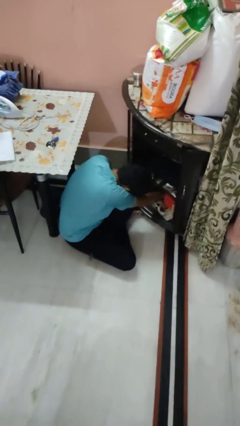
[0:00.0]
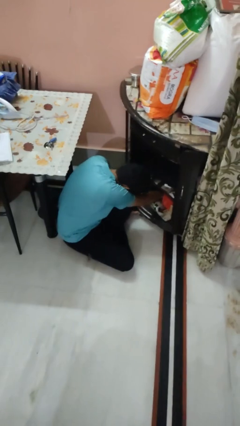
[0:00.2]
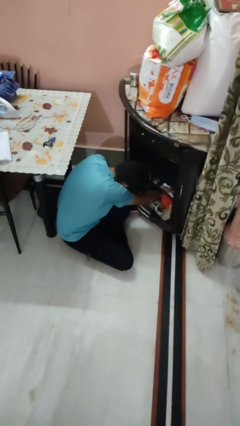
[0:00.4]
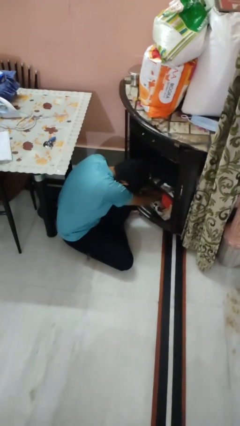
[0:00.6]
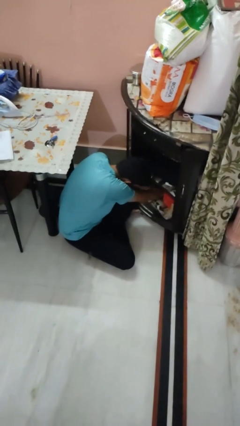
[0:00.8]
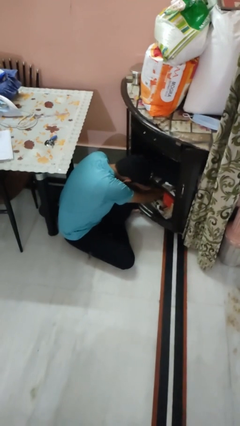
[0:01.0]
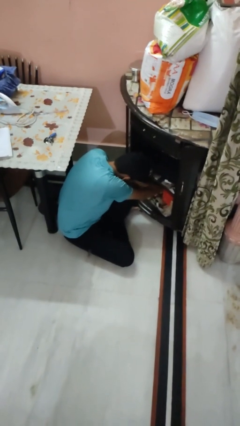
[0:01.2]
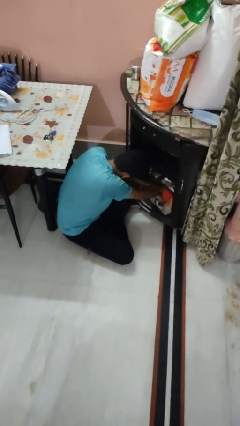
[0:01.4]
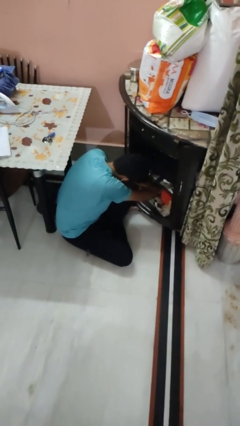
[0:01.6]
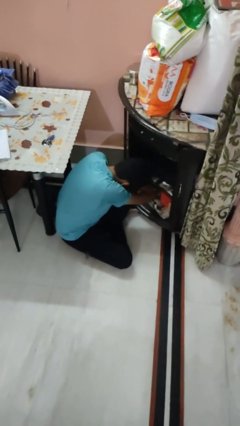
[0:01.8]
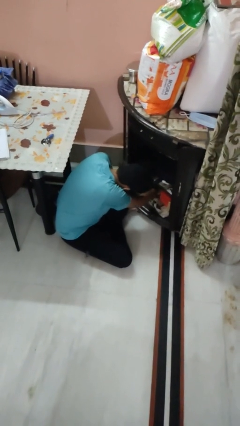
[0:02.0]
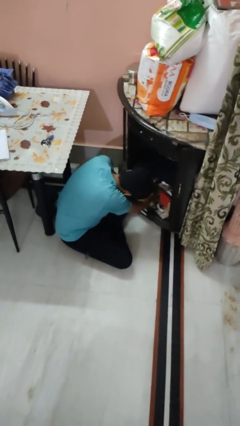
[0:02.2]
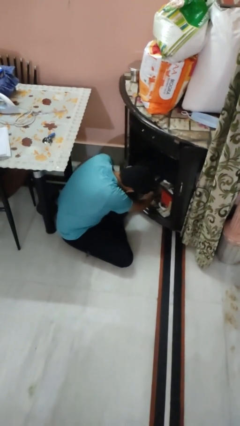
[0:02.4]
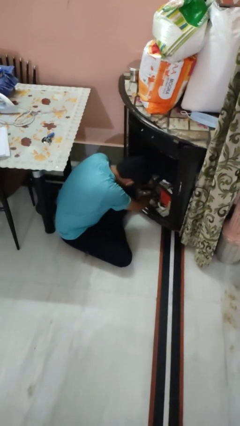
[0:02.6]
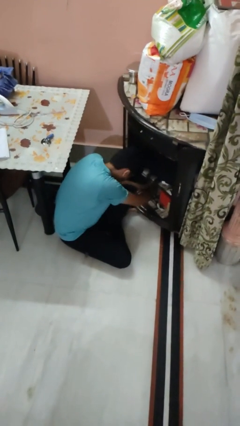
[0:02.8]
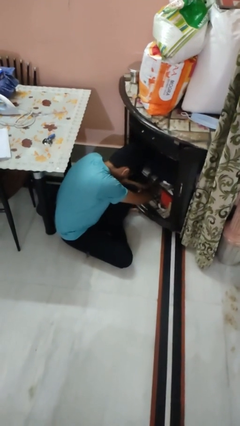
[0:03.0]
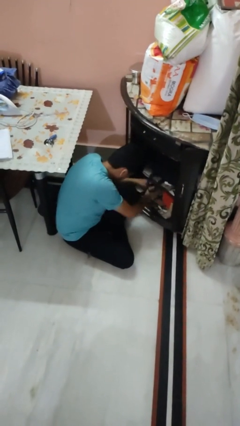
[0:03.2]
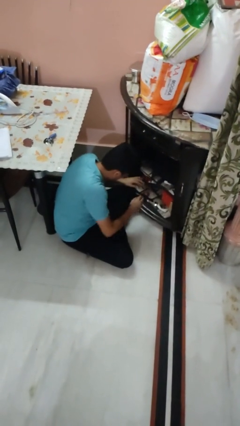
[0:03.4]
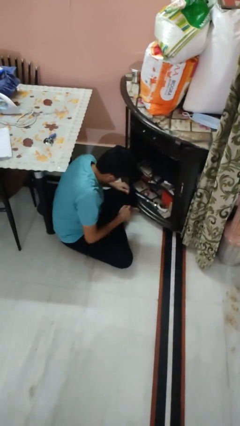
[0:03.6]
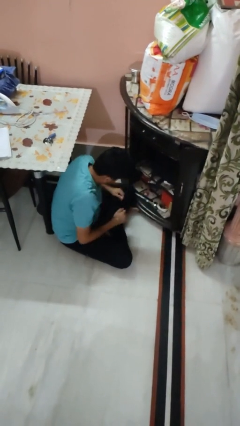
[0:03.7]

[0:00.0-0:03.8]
person searches in cabinet

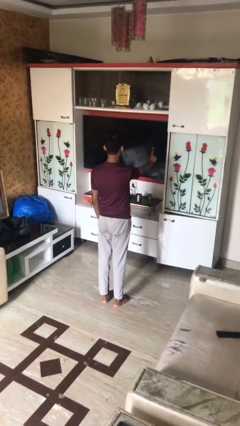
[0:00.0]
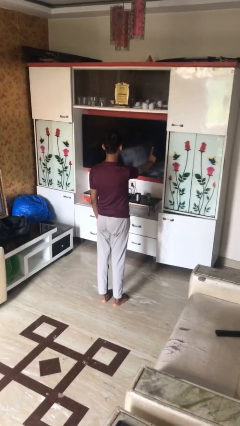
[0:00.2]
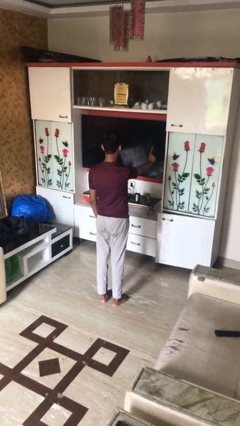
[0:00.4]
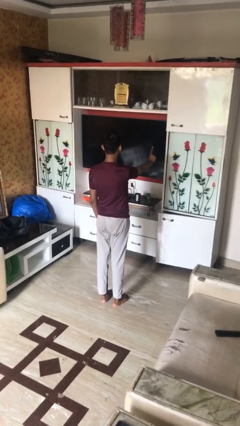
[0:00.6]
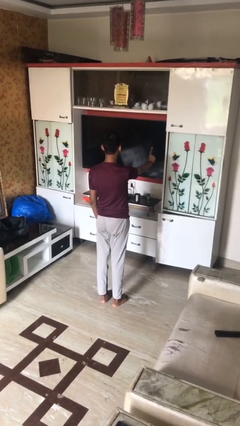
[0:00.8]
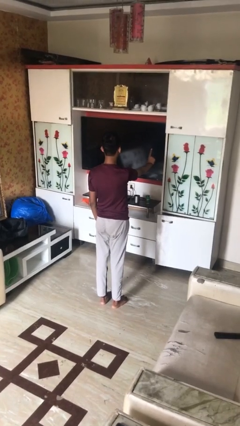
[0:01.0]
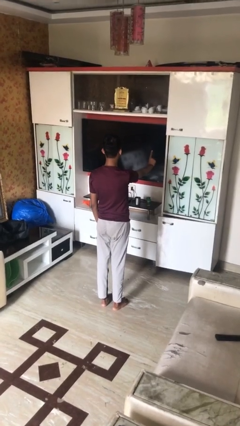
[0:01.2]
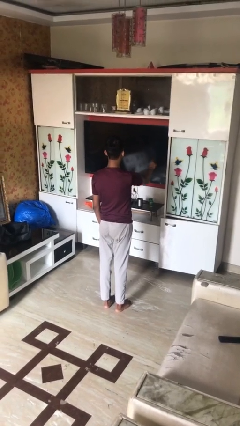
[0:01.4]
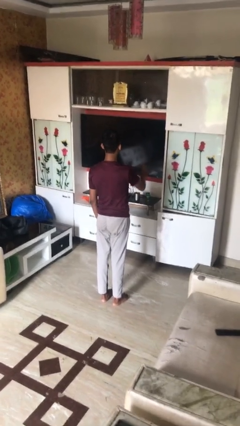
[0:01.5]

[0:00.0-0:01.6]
person gestures number one

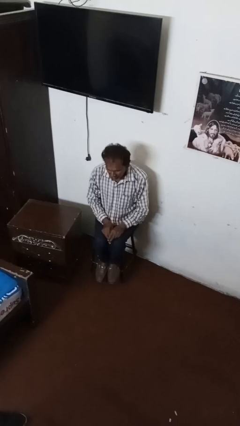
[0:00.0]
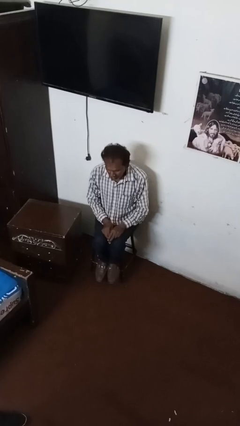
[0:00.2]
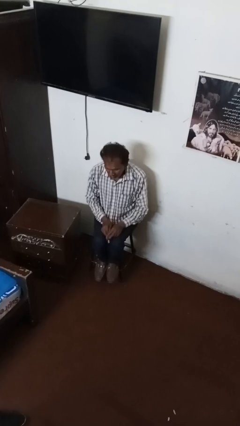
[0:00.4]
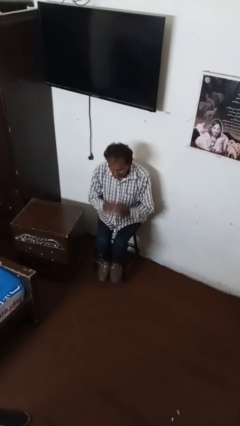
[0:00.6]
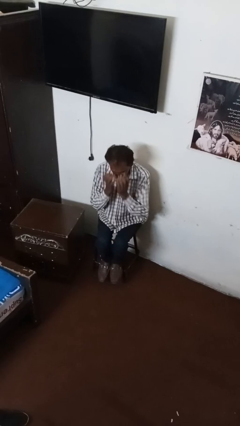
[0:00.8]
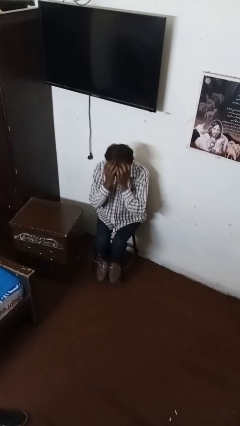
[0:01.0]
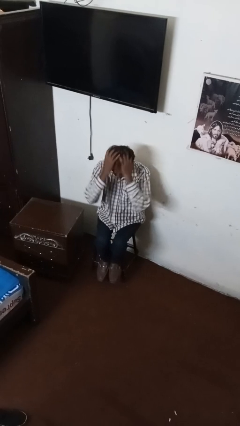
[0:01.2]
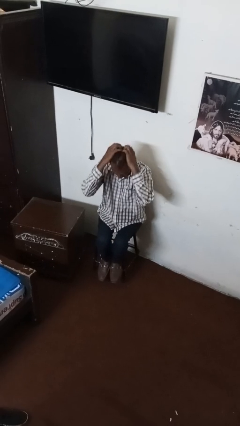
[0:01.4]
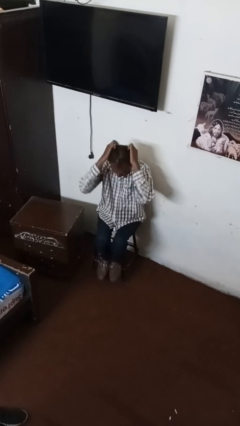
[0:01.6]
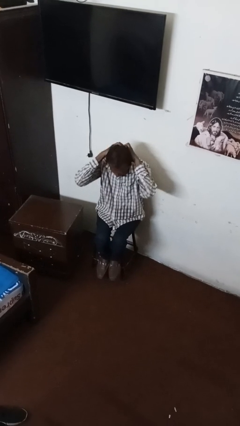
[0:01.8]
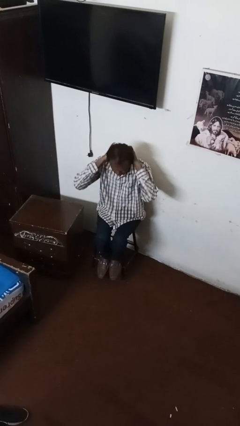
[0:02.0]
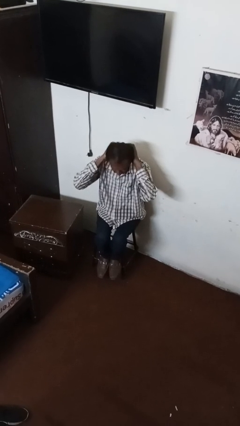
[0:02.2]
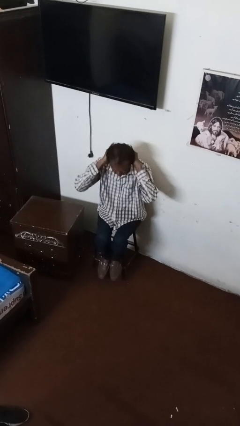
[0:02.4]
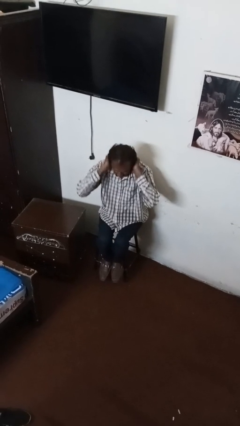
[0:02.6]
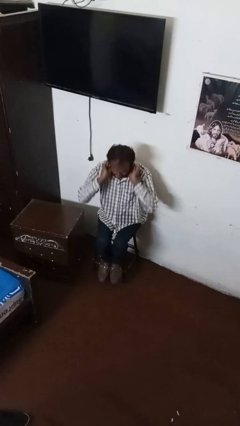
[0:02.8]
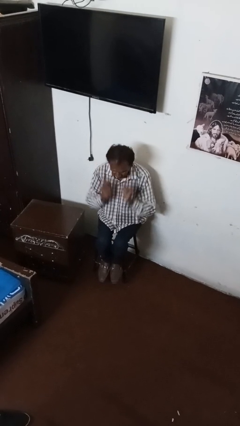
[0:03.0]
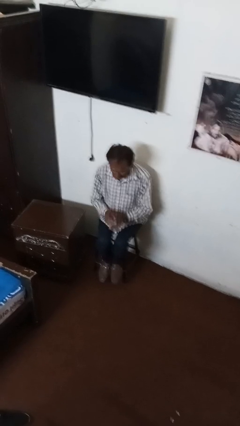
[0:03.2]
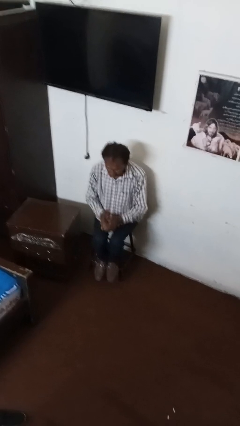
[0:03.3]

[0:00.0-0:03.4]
person strokes hair

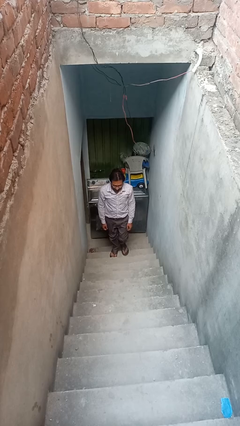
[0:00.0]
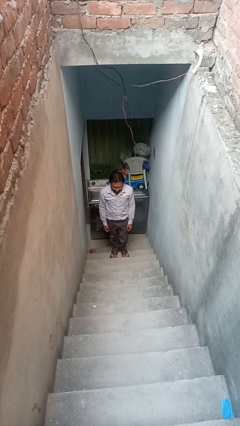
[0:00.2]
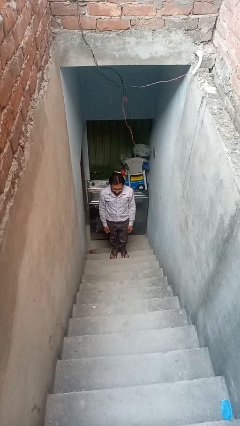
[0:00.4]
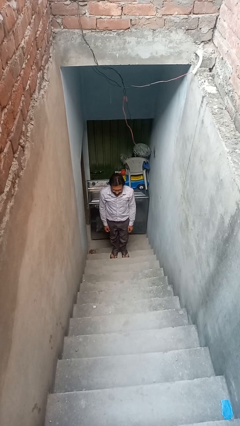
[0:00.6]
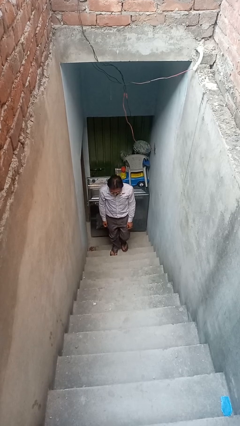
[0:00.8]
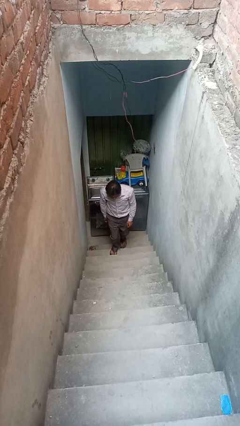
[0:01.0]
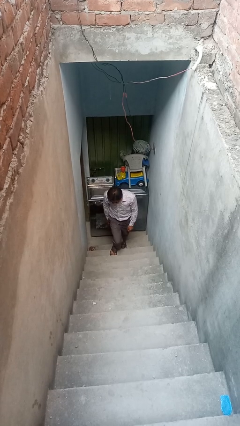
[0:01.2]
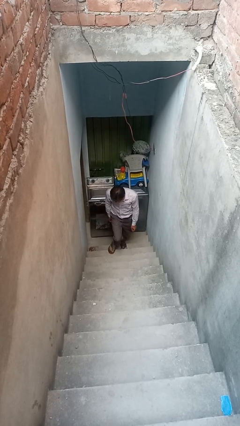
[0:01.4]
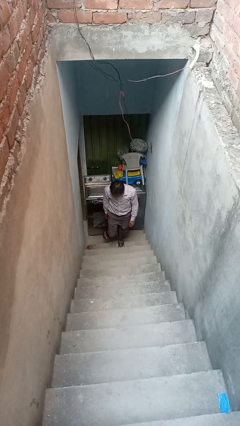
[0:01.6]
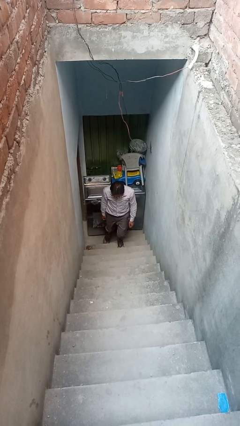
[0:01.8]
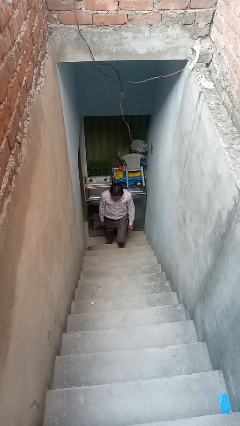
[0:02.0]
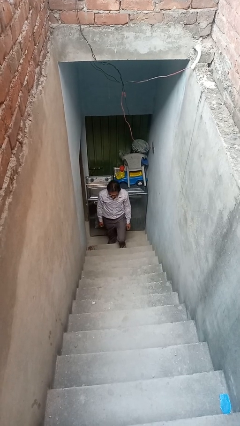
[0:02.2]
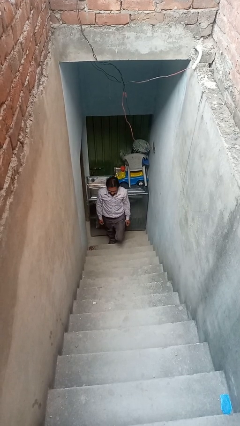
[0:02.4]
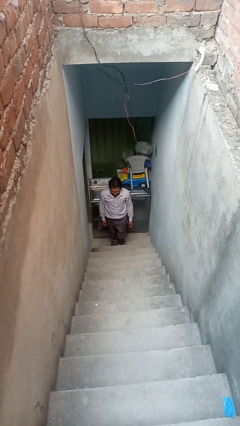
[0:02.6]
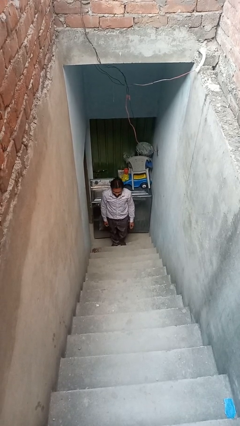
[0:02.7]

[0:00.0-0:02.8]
person climbs down stairs

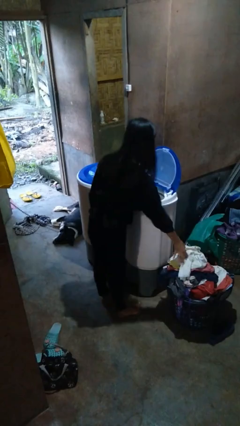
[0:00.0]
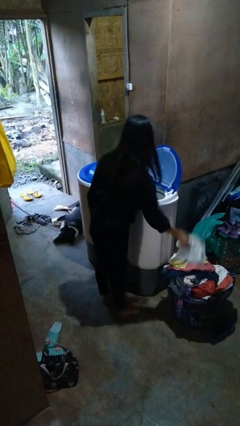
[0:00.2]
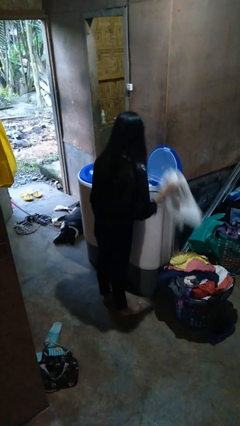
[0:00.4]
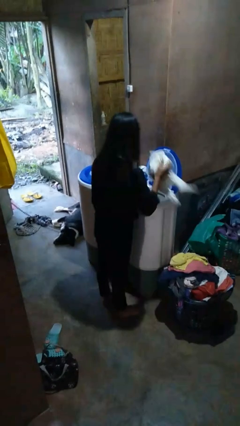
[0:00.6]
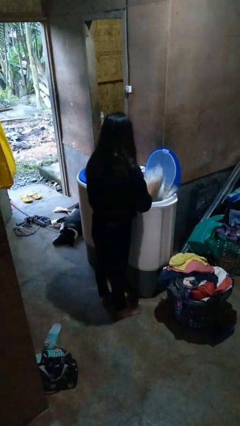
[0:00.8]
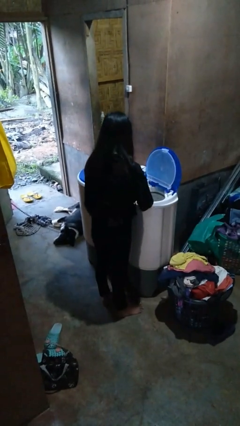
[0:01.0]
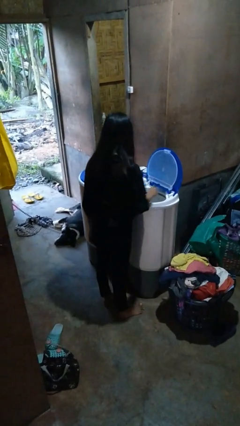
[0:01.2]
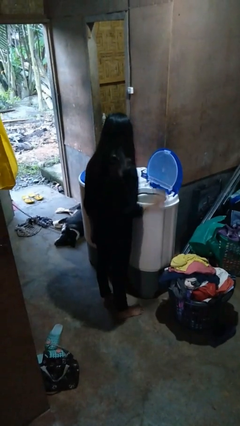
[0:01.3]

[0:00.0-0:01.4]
person loads dryer

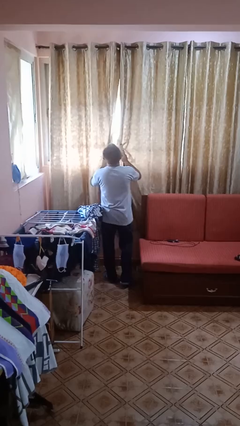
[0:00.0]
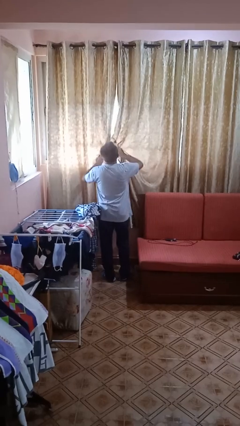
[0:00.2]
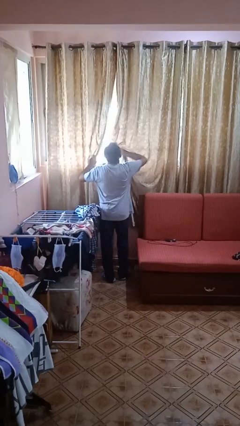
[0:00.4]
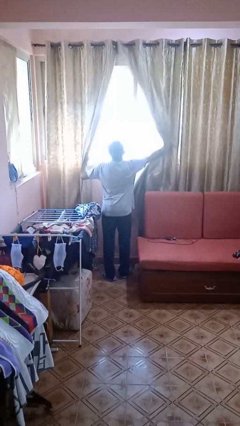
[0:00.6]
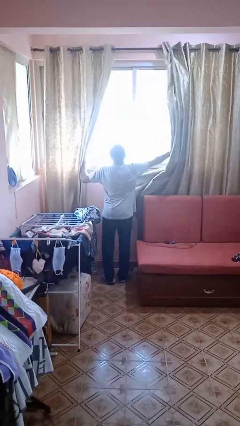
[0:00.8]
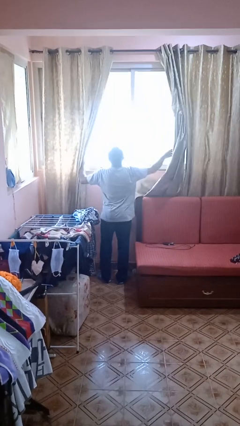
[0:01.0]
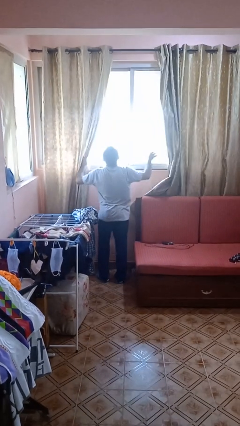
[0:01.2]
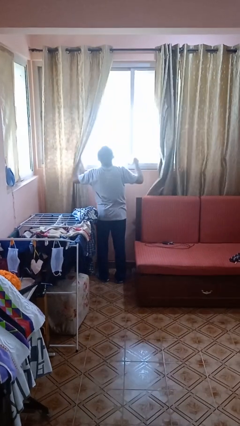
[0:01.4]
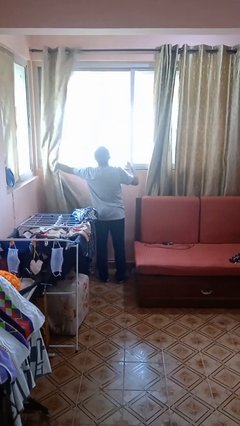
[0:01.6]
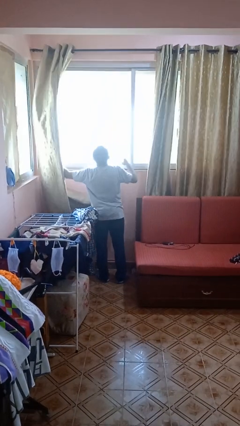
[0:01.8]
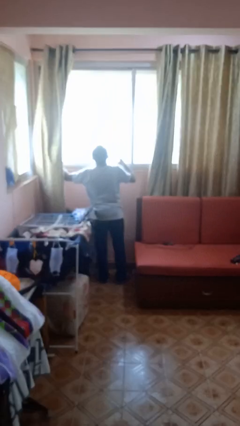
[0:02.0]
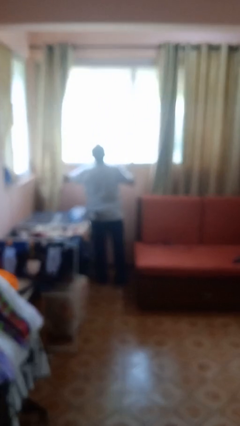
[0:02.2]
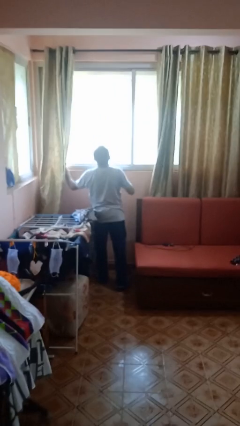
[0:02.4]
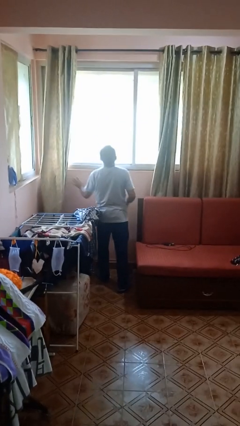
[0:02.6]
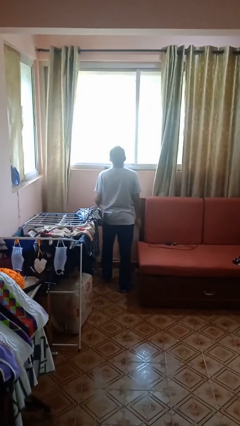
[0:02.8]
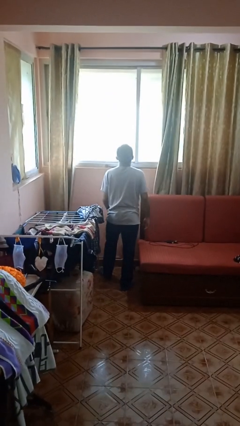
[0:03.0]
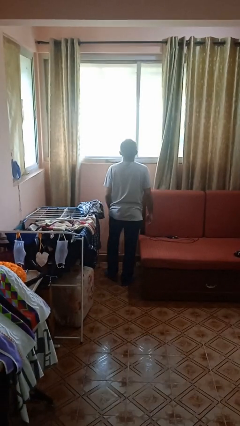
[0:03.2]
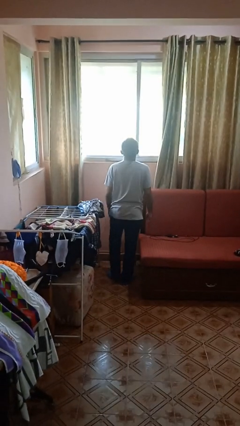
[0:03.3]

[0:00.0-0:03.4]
person opens curtains

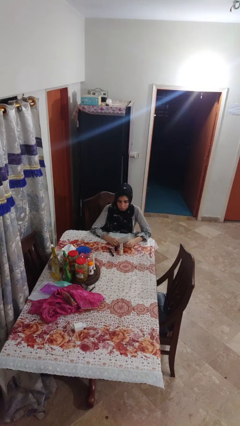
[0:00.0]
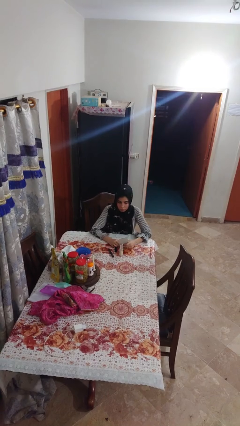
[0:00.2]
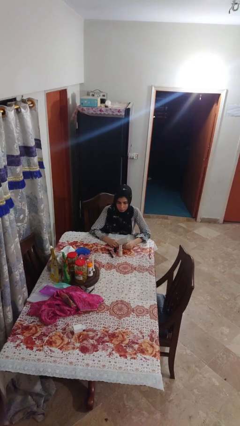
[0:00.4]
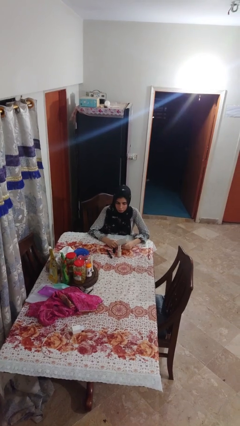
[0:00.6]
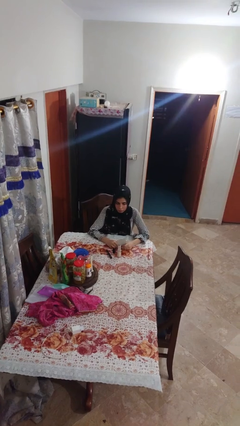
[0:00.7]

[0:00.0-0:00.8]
person applies lip makeup
